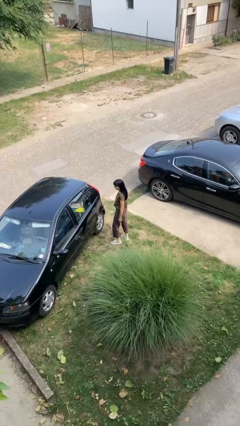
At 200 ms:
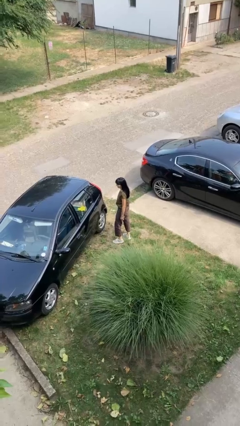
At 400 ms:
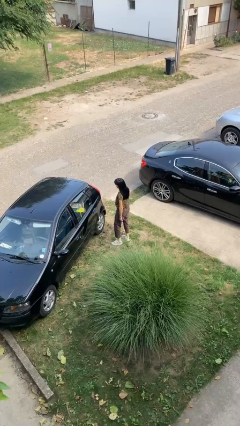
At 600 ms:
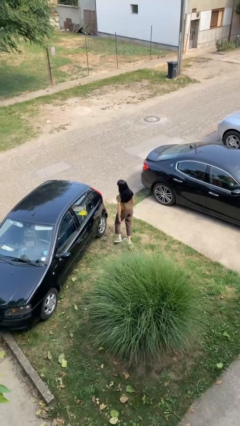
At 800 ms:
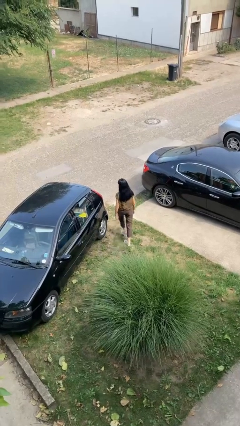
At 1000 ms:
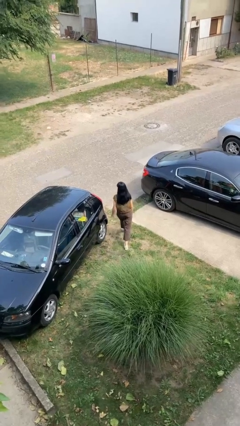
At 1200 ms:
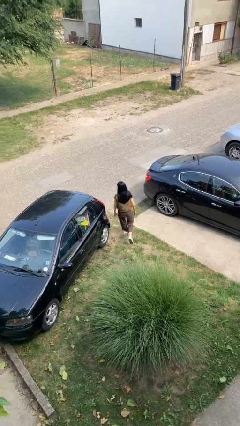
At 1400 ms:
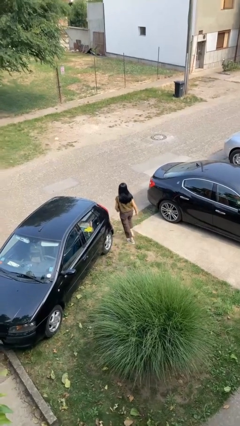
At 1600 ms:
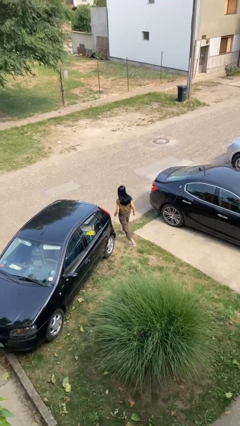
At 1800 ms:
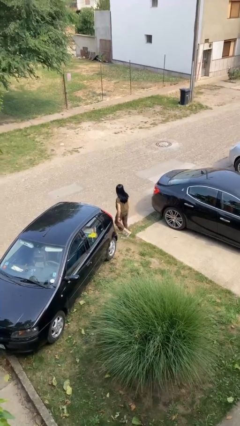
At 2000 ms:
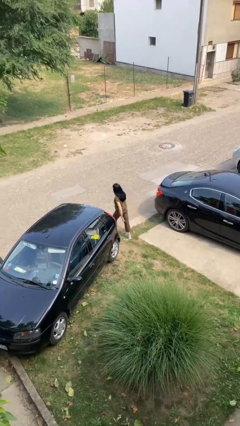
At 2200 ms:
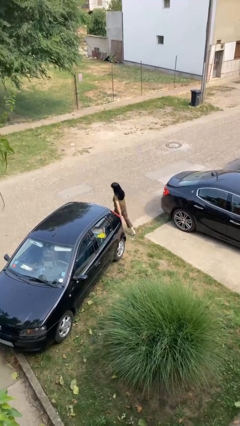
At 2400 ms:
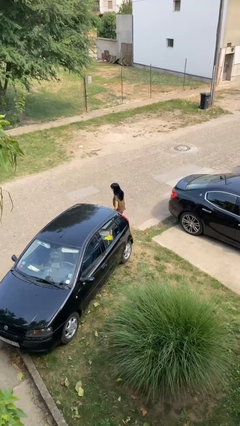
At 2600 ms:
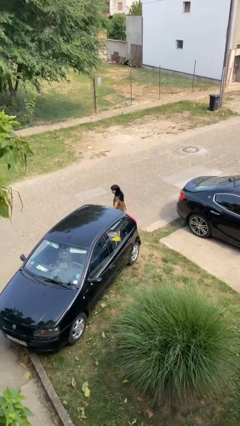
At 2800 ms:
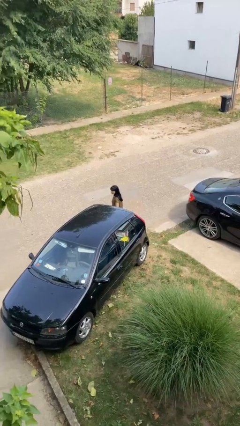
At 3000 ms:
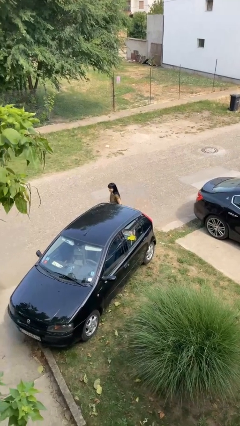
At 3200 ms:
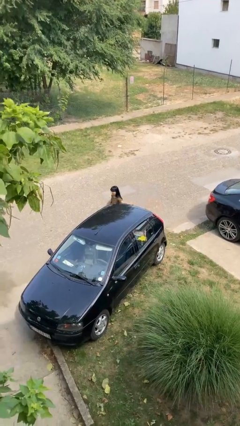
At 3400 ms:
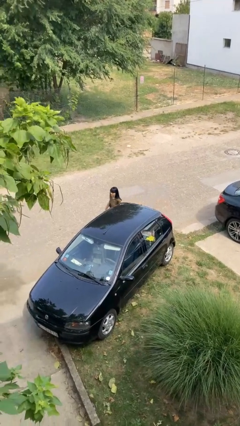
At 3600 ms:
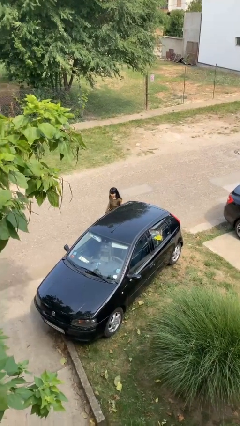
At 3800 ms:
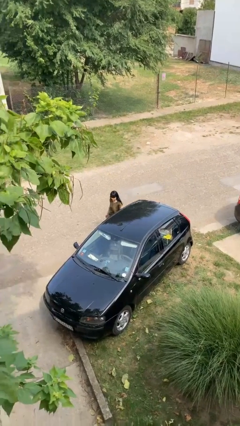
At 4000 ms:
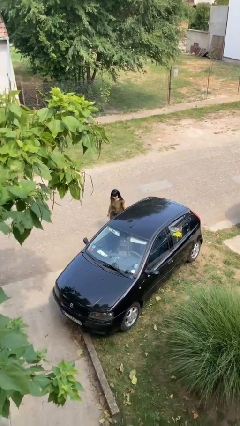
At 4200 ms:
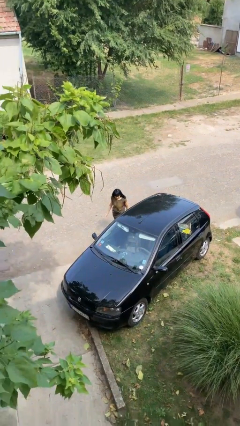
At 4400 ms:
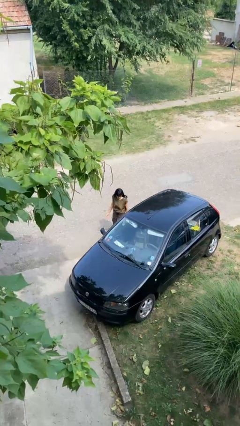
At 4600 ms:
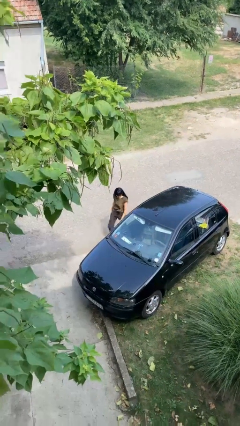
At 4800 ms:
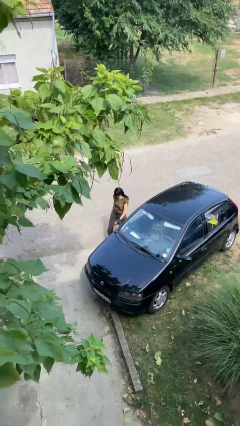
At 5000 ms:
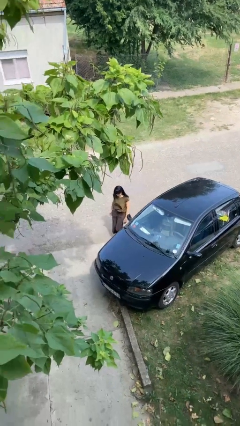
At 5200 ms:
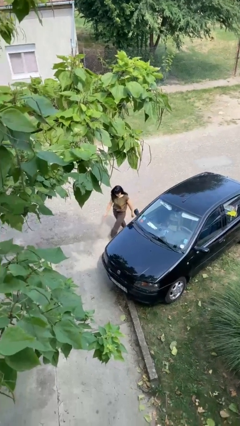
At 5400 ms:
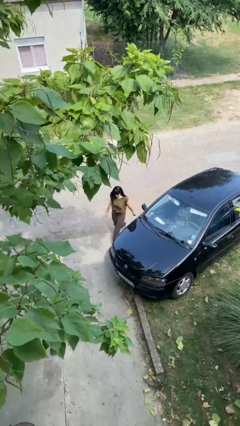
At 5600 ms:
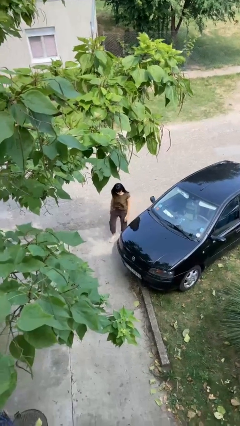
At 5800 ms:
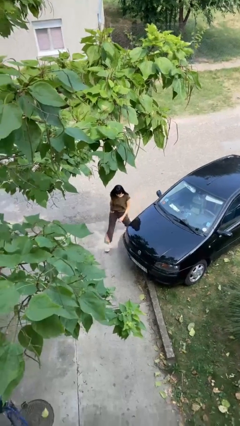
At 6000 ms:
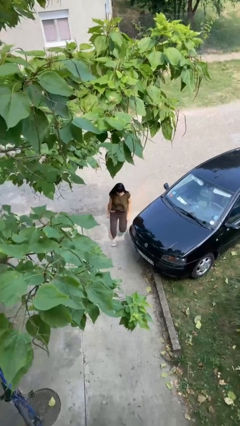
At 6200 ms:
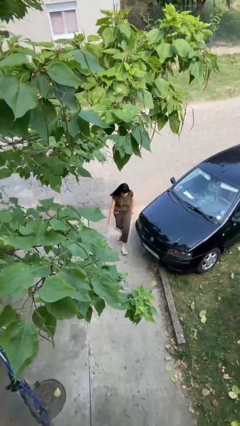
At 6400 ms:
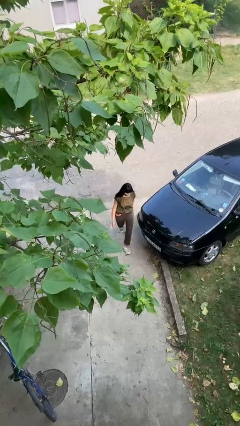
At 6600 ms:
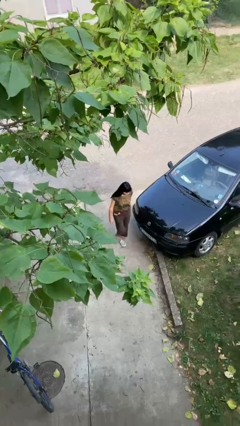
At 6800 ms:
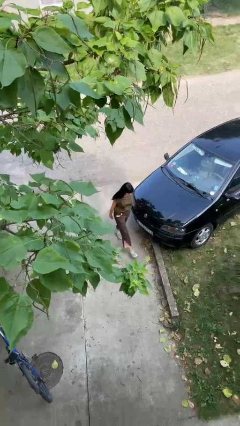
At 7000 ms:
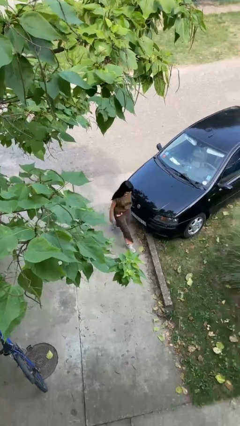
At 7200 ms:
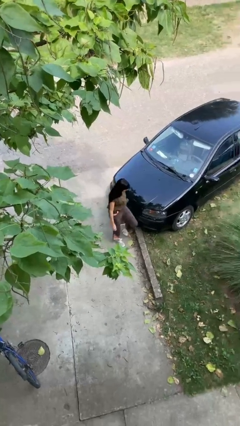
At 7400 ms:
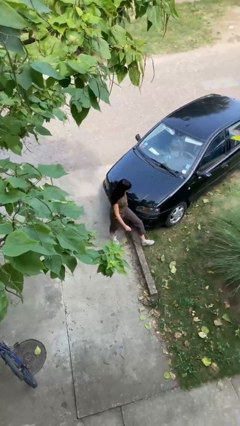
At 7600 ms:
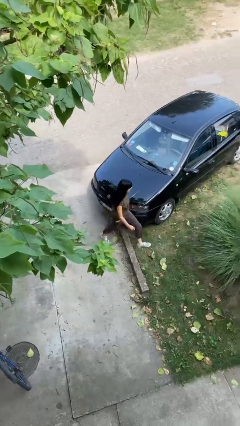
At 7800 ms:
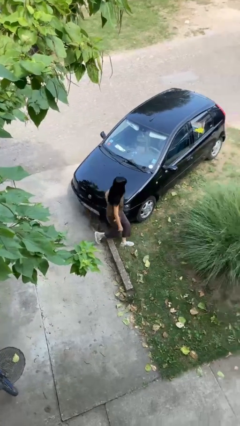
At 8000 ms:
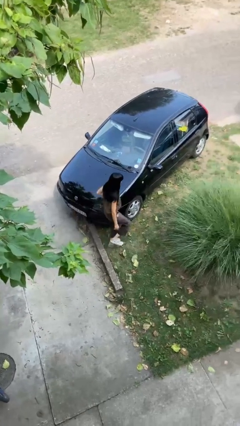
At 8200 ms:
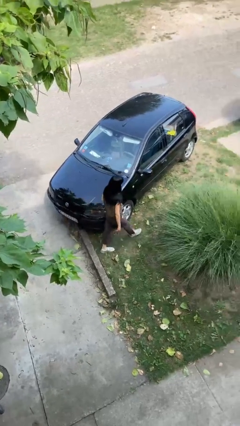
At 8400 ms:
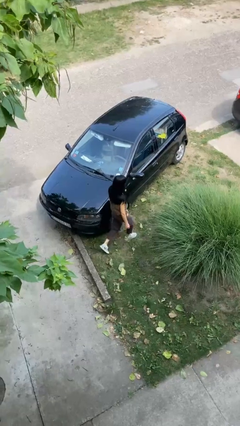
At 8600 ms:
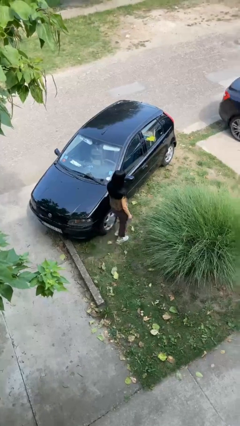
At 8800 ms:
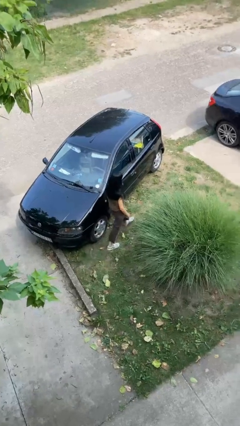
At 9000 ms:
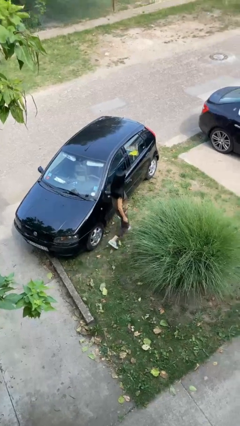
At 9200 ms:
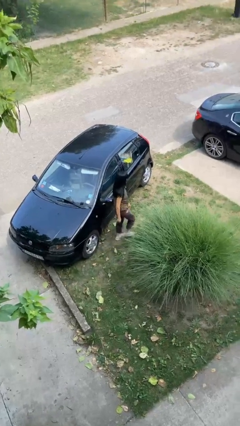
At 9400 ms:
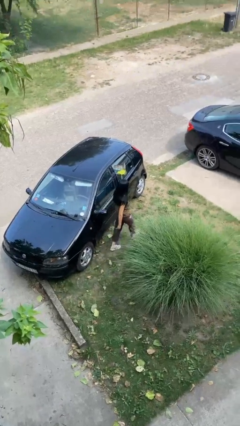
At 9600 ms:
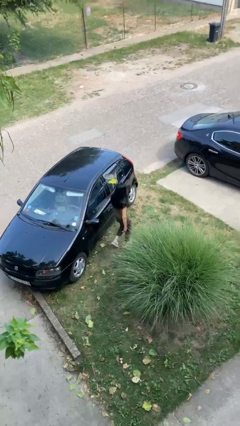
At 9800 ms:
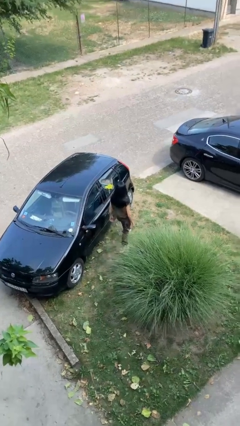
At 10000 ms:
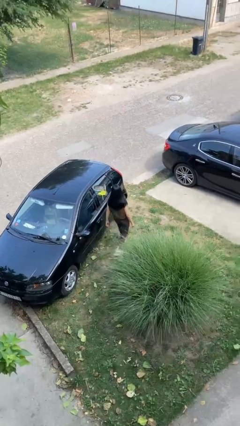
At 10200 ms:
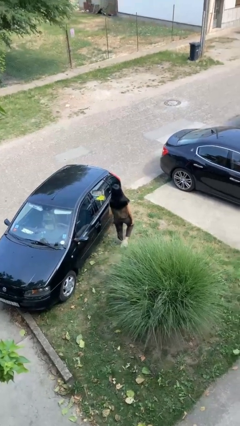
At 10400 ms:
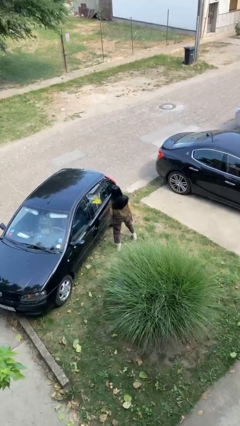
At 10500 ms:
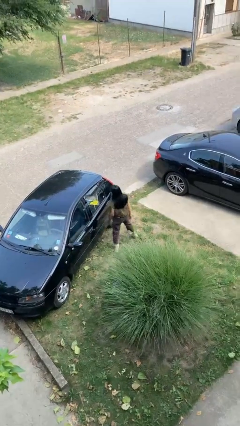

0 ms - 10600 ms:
person walks around car

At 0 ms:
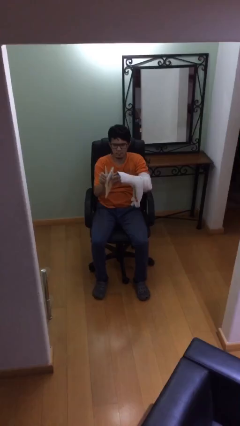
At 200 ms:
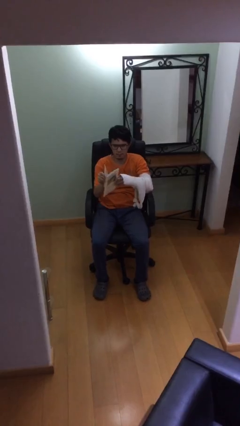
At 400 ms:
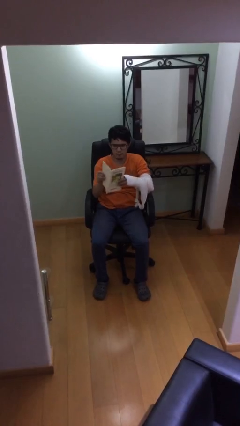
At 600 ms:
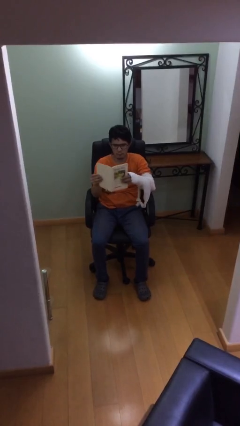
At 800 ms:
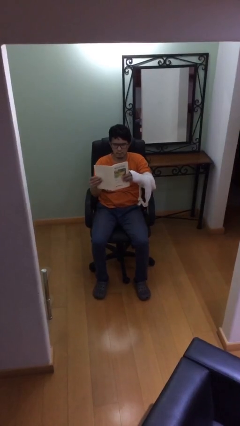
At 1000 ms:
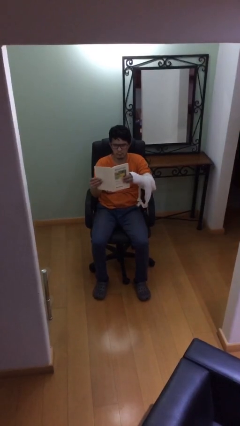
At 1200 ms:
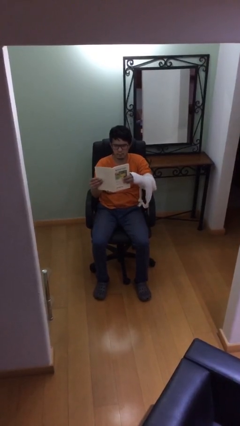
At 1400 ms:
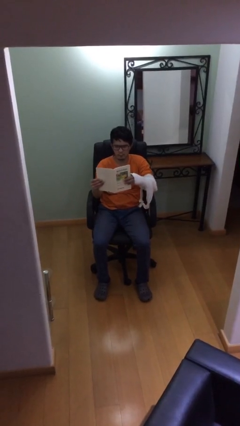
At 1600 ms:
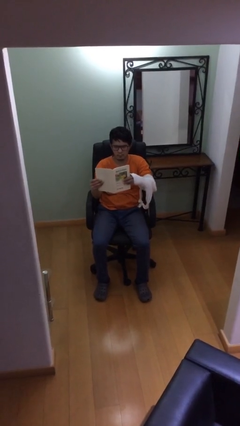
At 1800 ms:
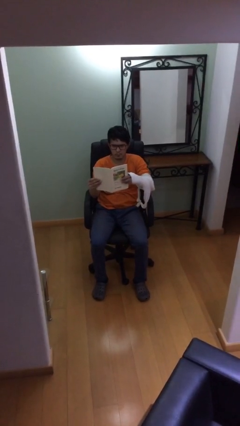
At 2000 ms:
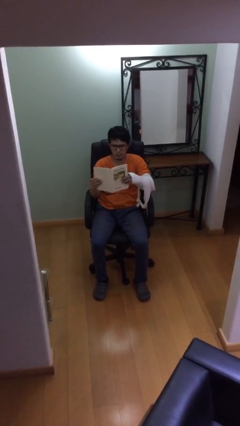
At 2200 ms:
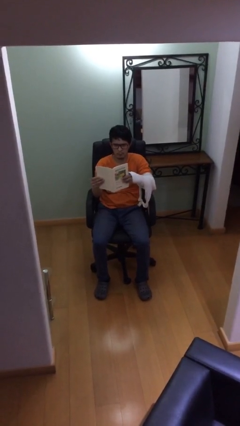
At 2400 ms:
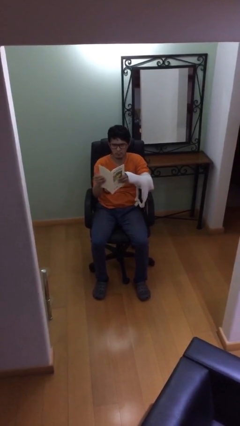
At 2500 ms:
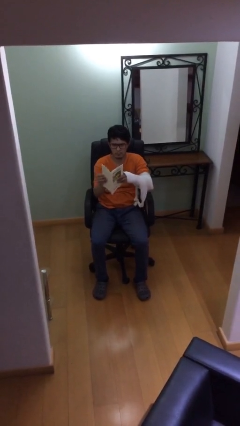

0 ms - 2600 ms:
person reads document

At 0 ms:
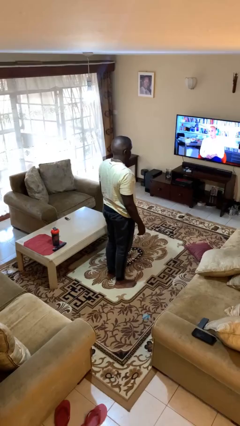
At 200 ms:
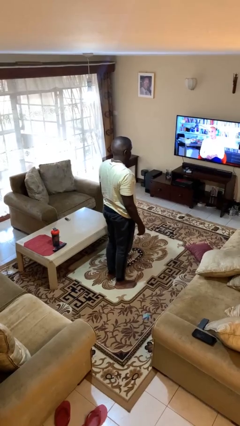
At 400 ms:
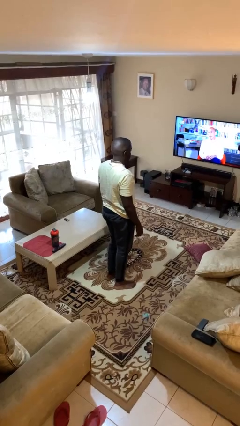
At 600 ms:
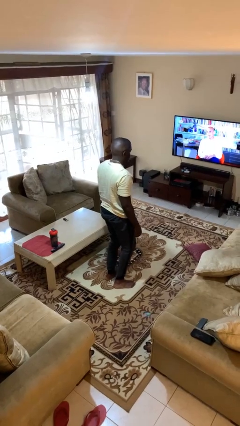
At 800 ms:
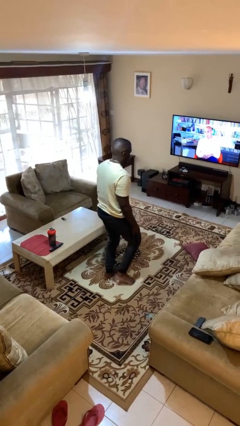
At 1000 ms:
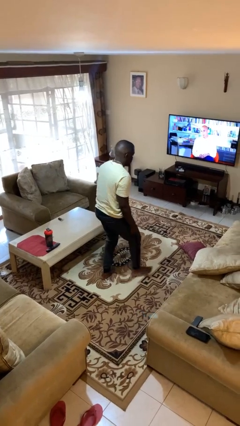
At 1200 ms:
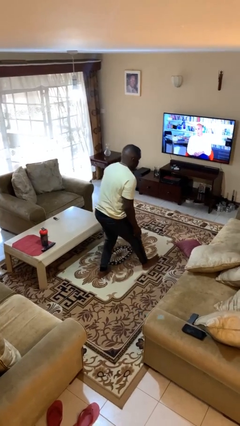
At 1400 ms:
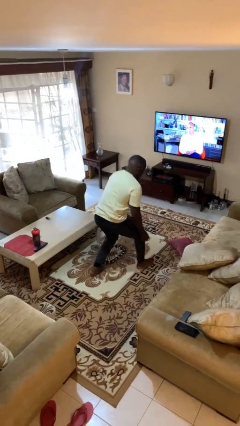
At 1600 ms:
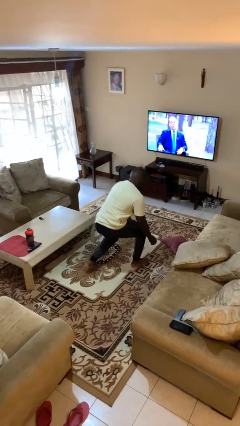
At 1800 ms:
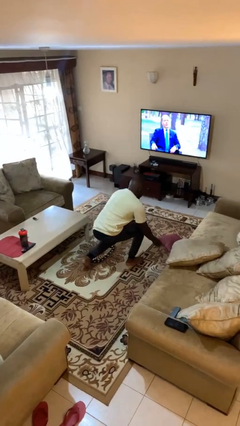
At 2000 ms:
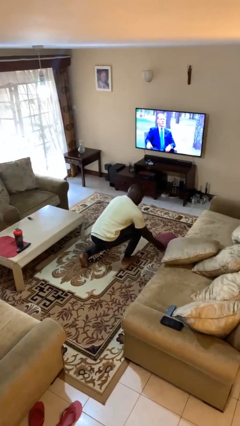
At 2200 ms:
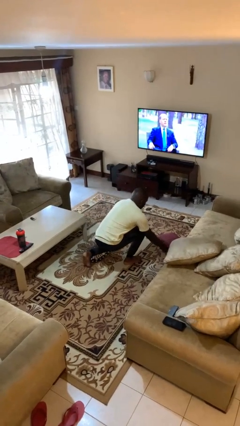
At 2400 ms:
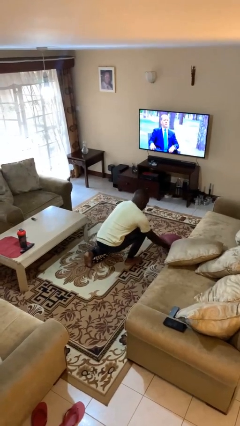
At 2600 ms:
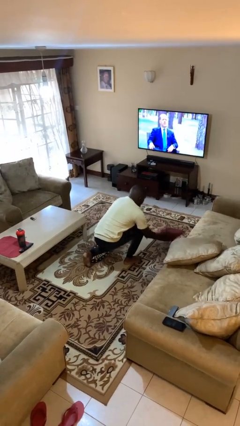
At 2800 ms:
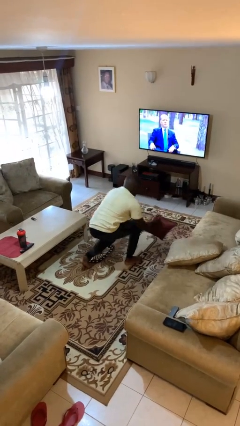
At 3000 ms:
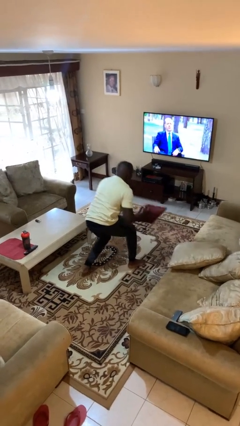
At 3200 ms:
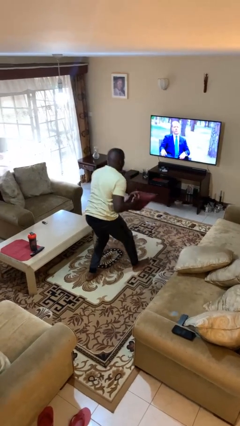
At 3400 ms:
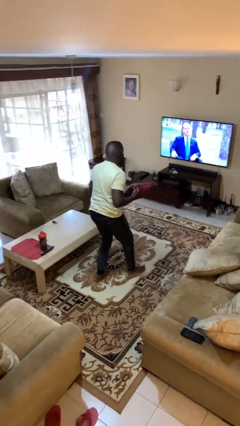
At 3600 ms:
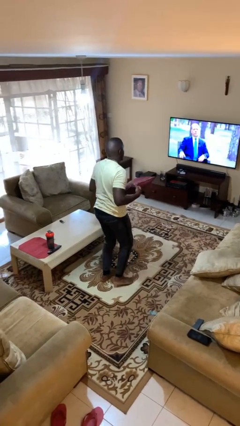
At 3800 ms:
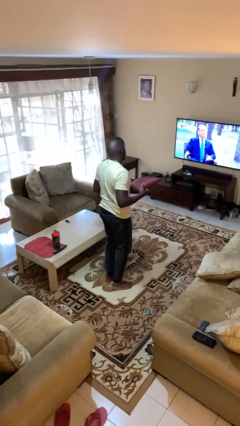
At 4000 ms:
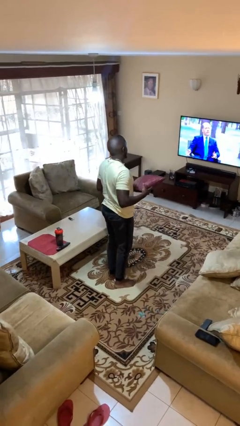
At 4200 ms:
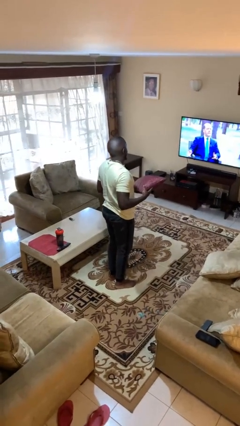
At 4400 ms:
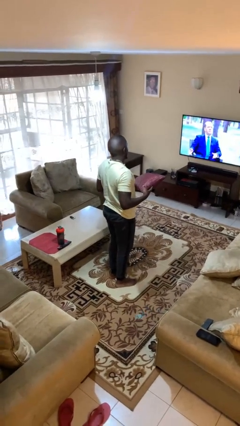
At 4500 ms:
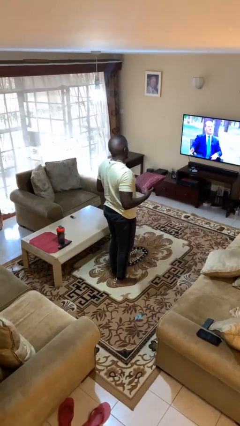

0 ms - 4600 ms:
person picks up object from floor

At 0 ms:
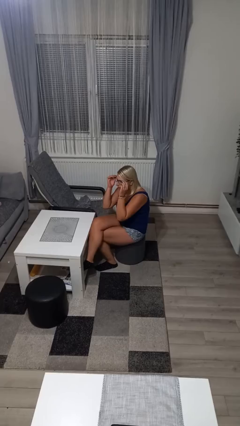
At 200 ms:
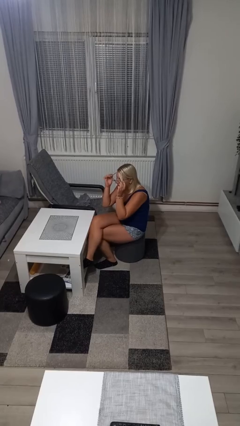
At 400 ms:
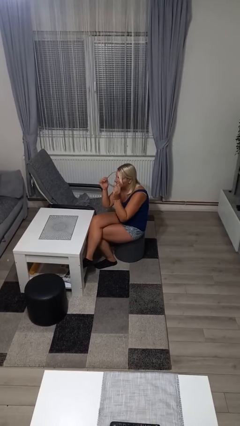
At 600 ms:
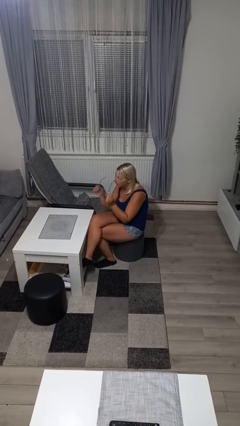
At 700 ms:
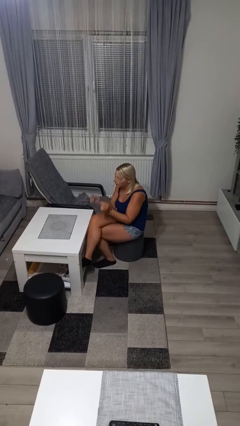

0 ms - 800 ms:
person takes off glasses
